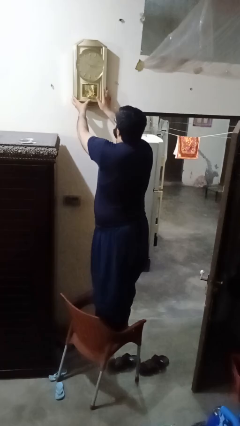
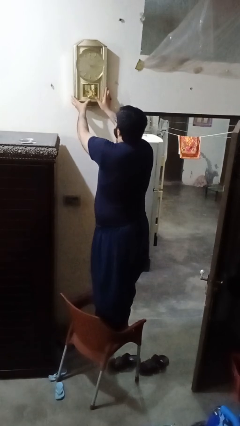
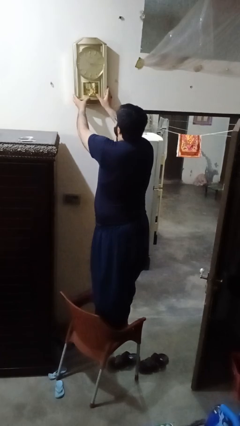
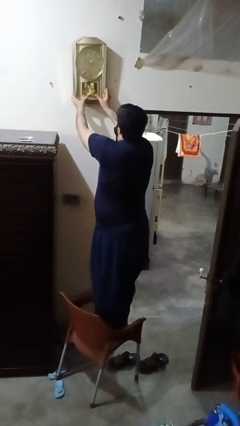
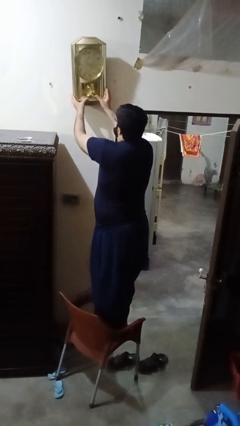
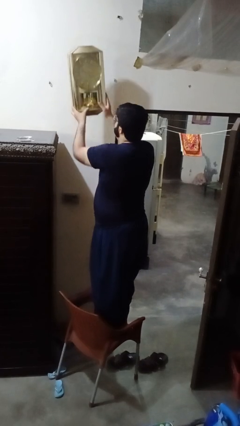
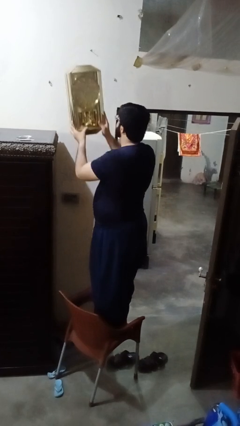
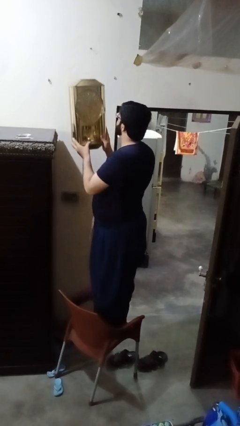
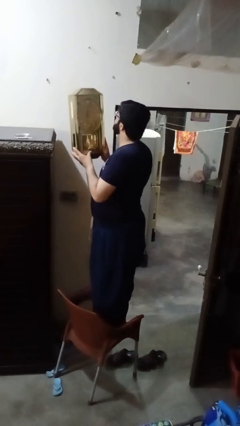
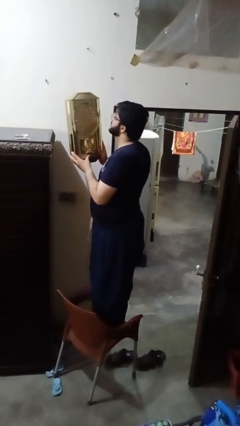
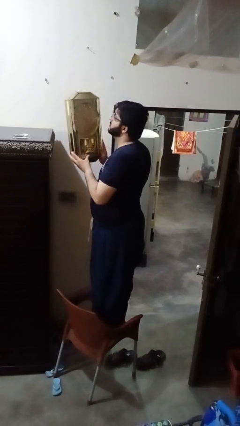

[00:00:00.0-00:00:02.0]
person takes down smoke detector

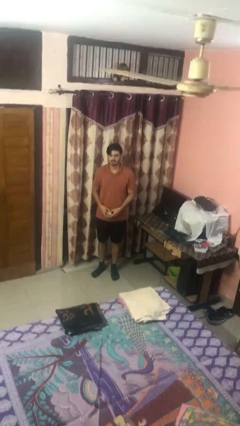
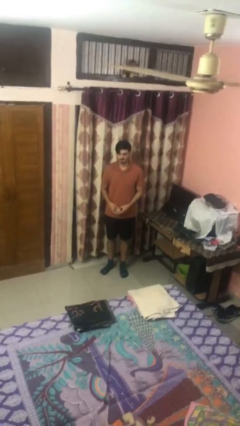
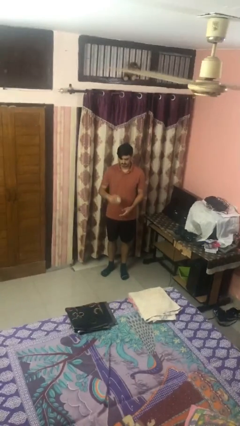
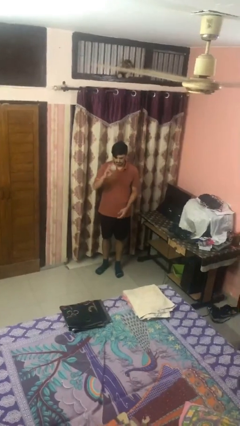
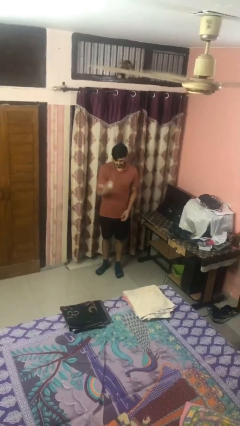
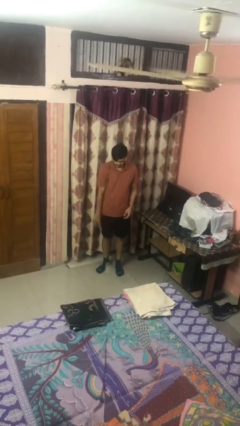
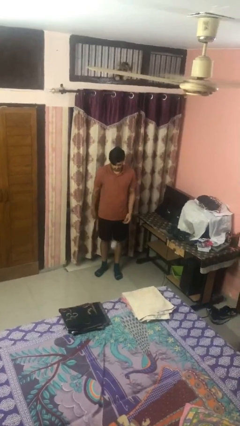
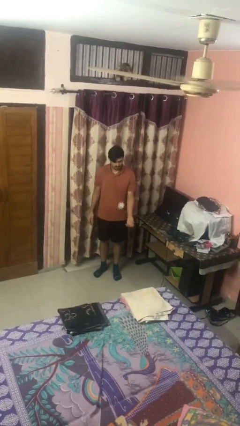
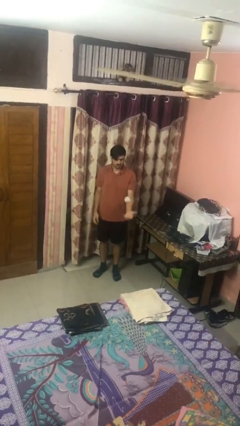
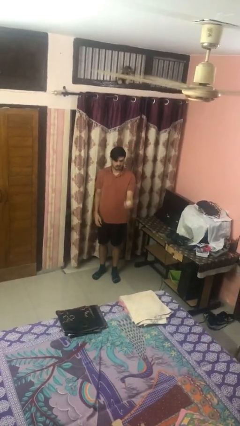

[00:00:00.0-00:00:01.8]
person bounces ball on floor

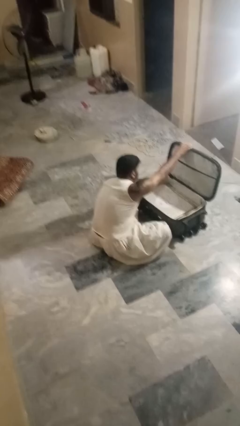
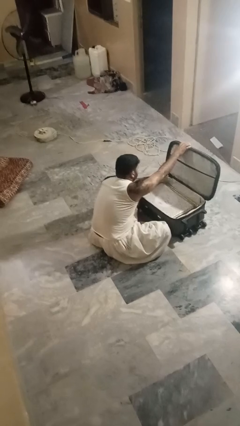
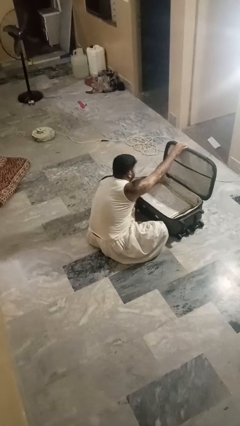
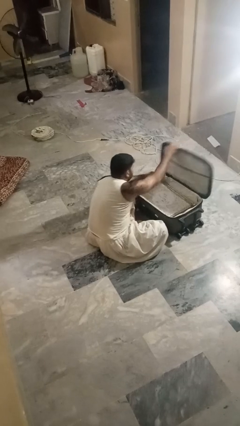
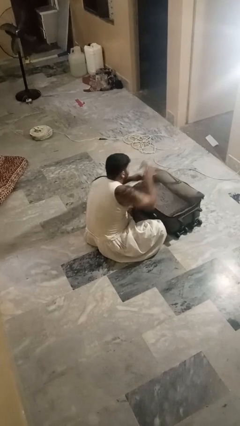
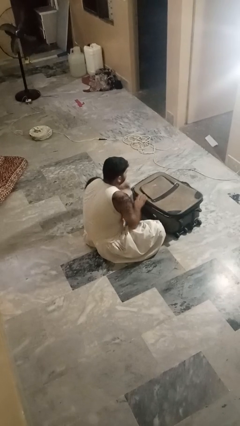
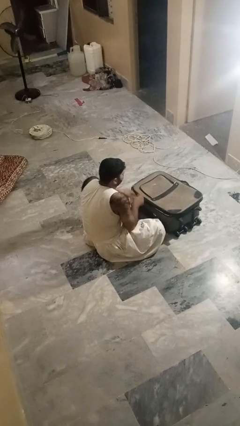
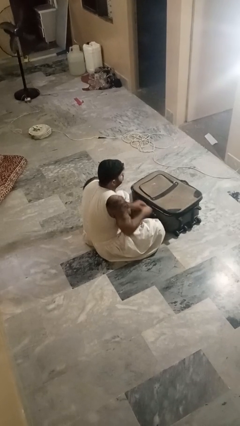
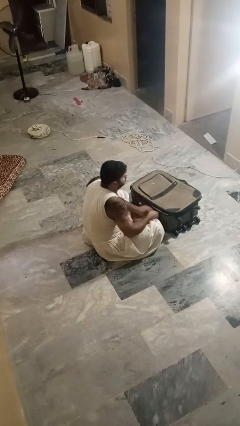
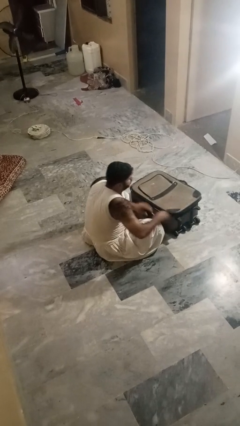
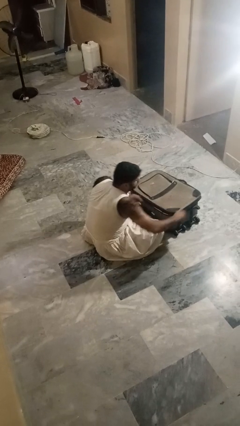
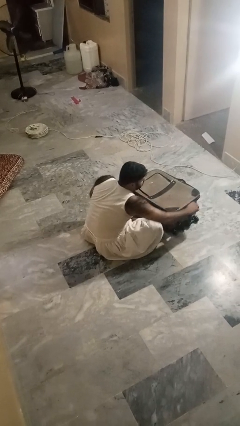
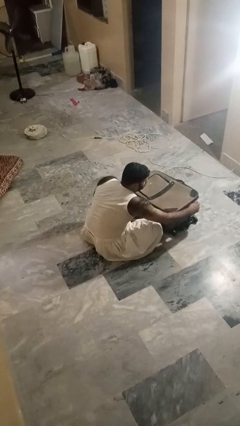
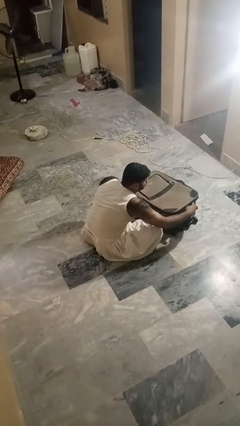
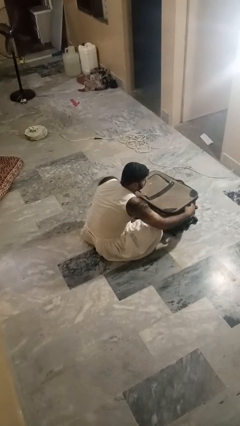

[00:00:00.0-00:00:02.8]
person closes suitcase

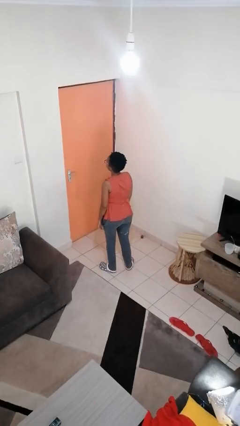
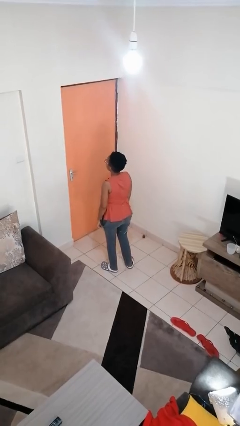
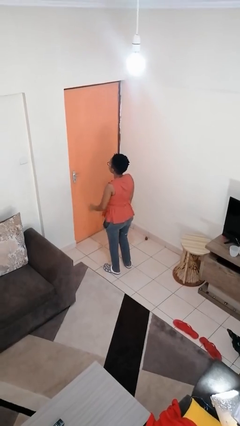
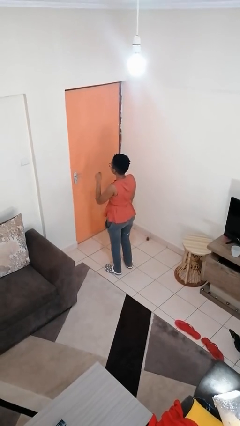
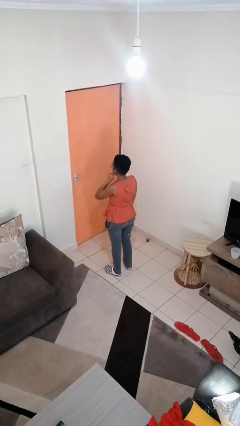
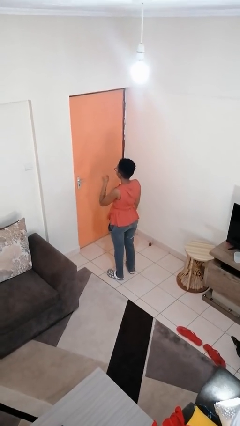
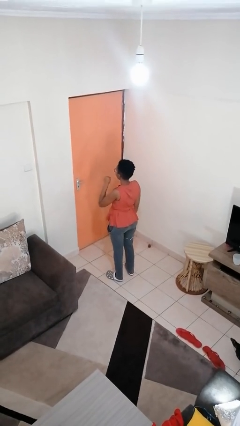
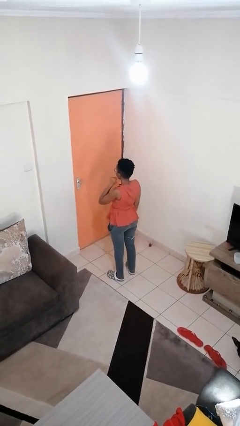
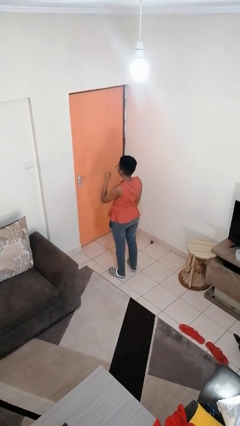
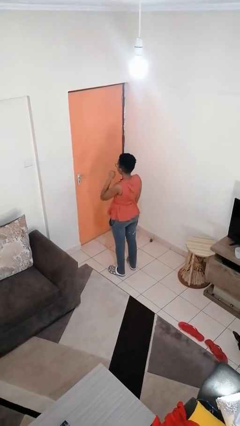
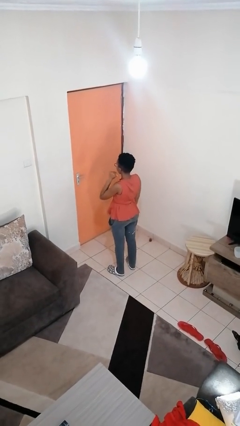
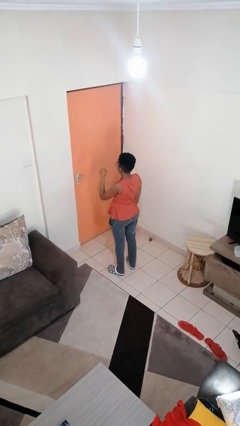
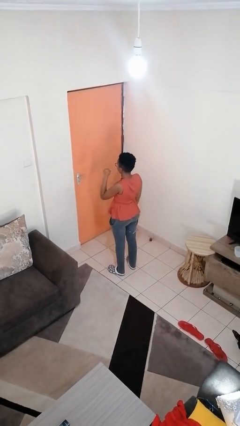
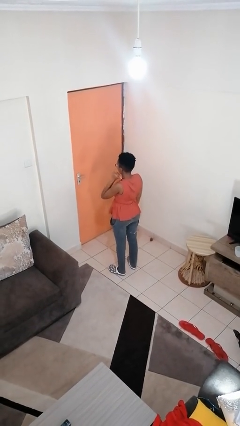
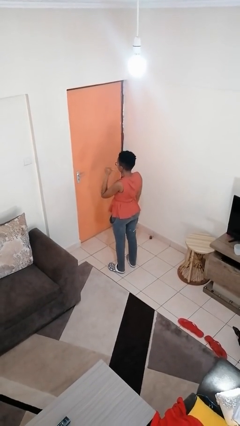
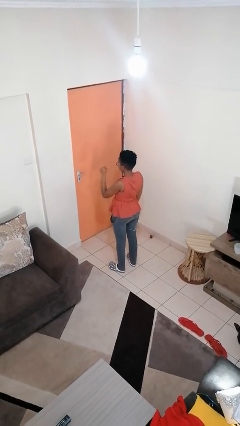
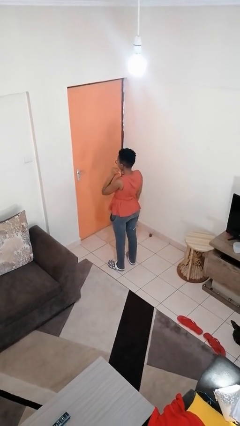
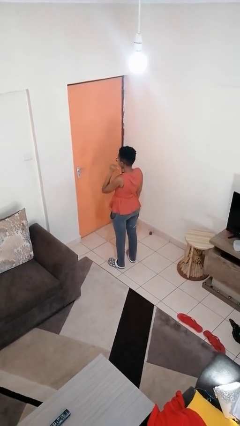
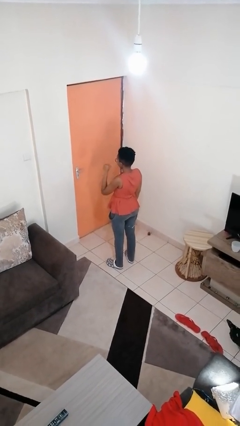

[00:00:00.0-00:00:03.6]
person gestures behind me

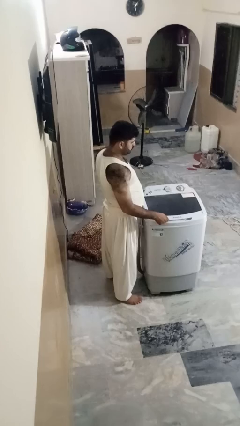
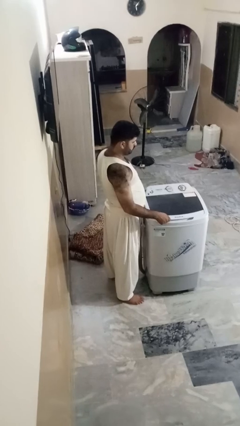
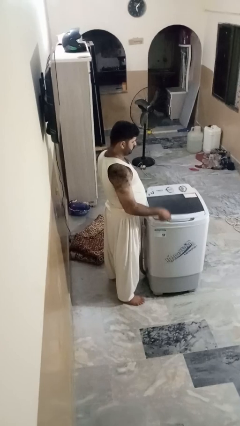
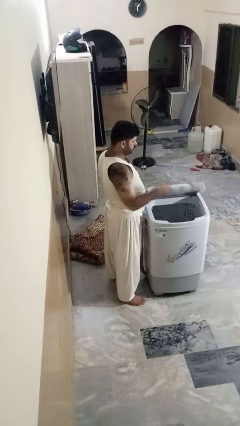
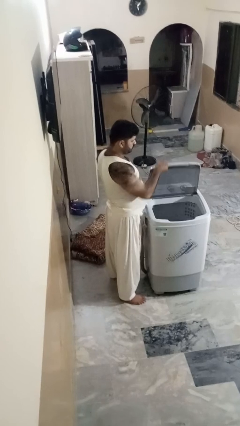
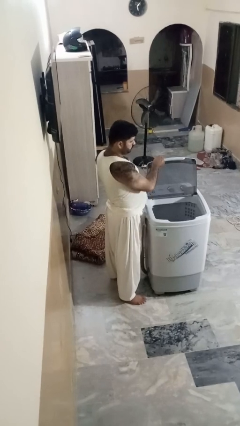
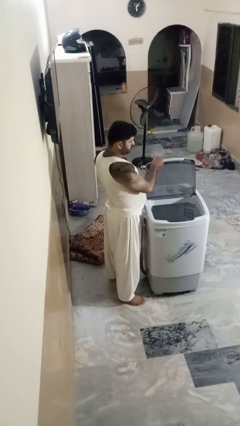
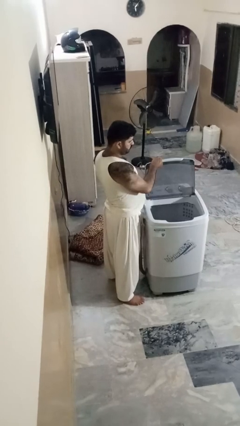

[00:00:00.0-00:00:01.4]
person opens clothes washer

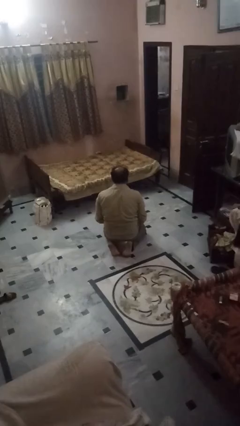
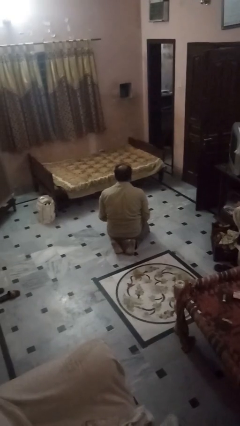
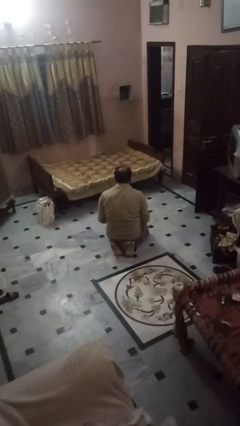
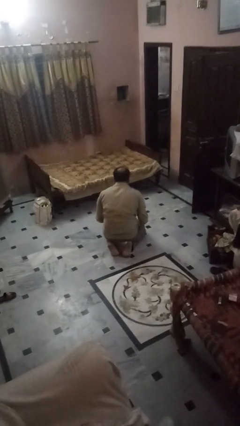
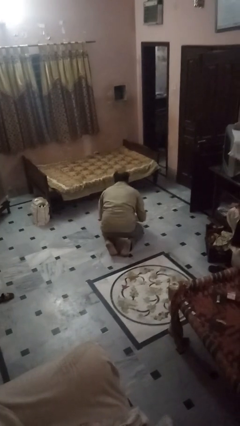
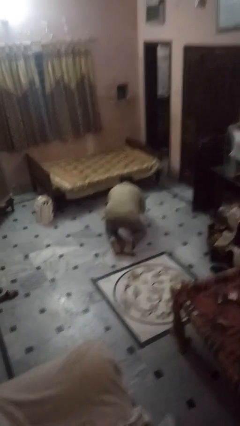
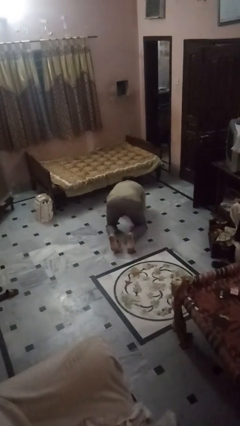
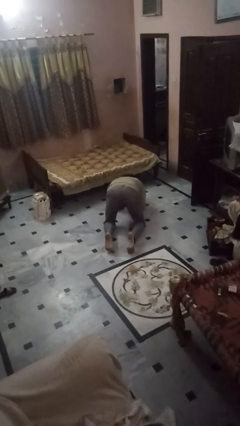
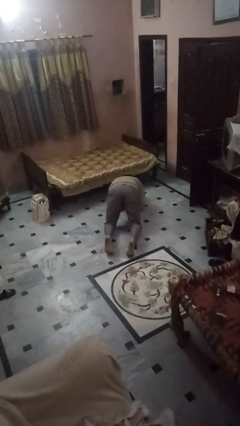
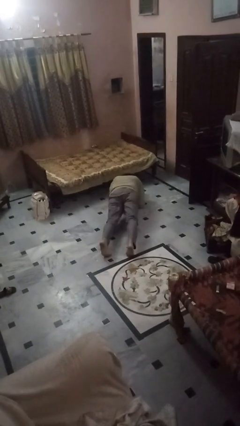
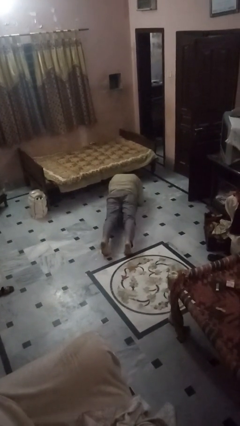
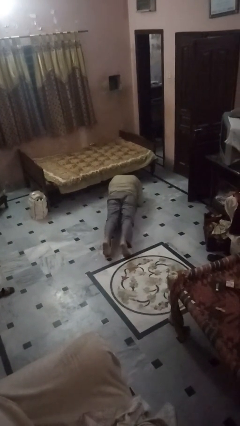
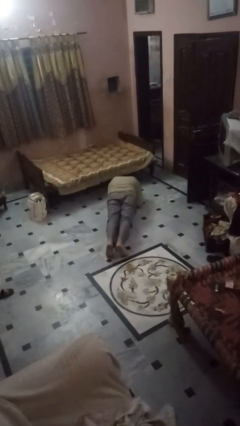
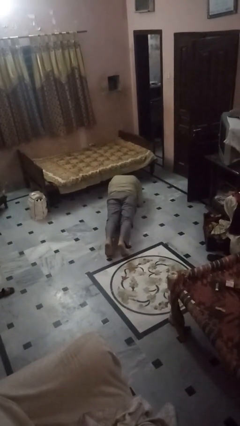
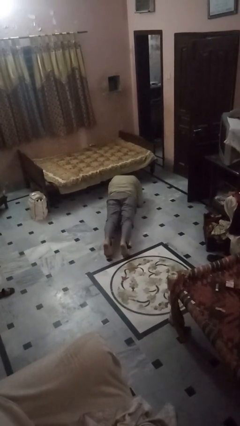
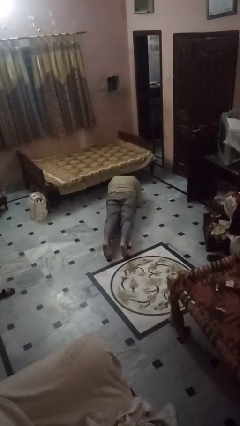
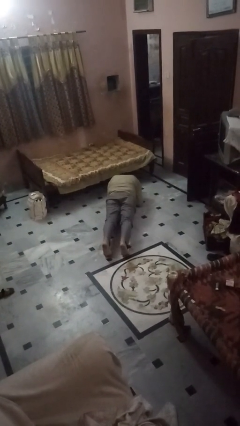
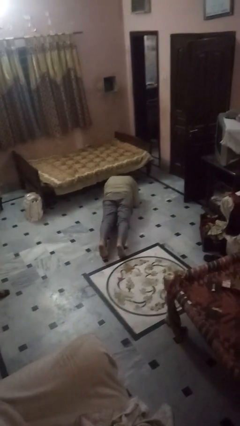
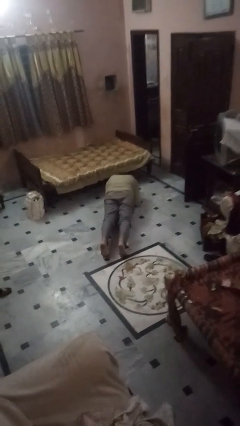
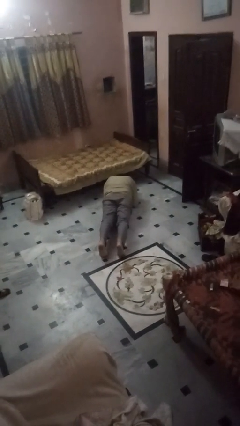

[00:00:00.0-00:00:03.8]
person exercises with plank

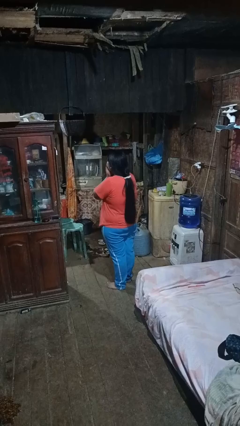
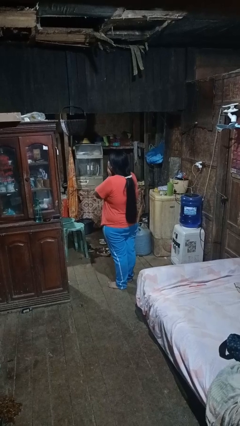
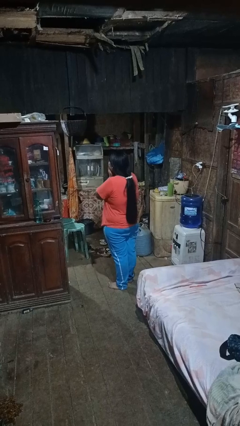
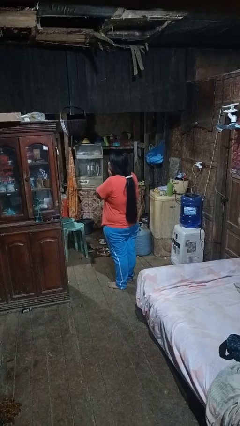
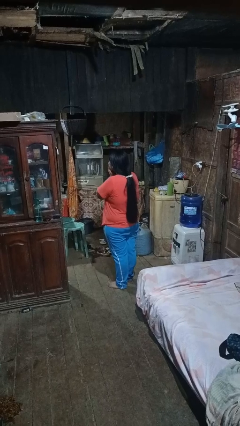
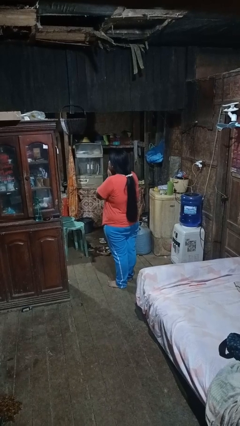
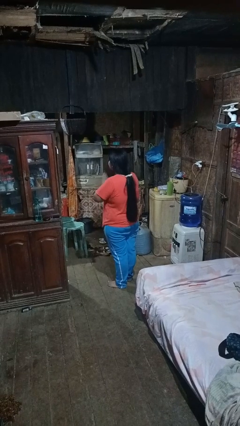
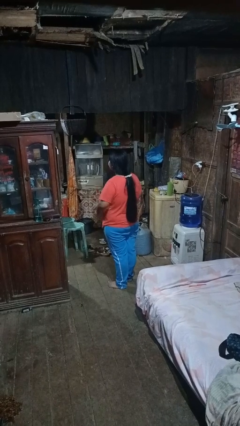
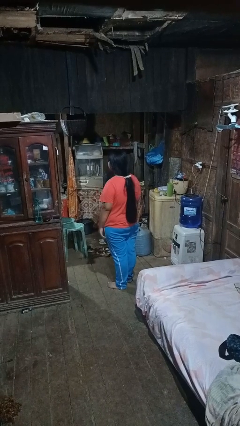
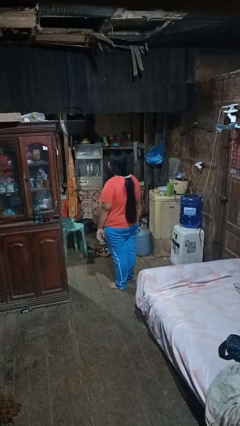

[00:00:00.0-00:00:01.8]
person yawns
